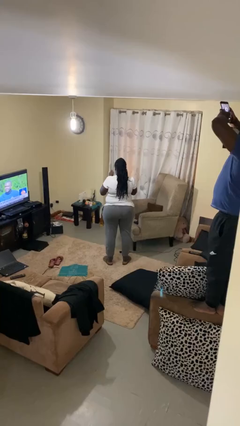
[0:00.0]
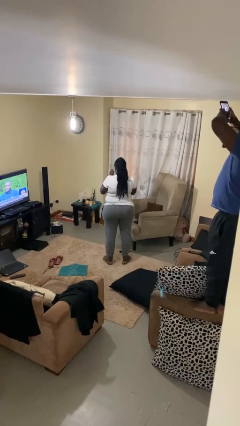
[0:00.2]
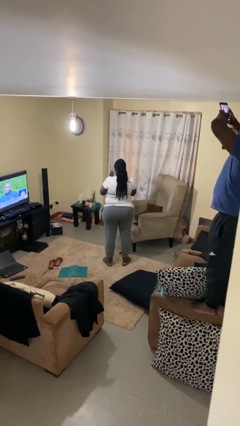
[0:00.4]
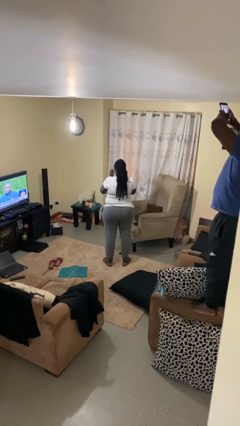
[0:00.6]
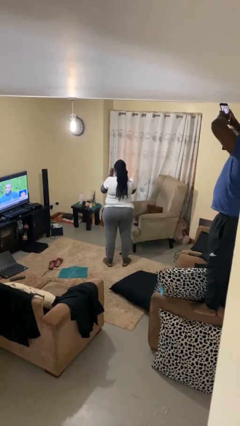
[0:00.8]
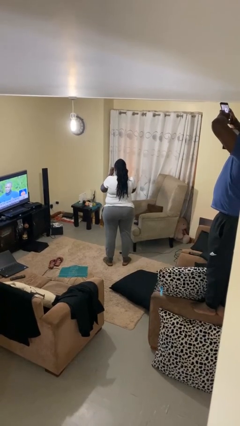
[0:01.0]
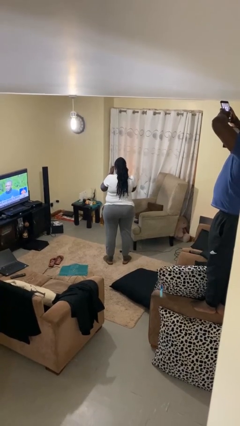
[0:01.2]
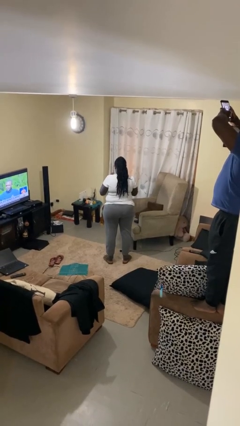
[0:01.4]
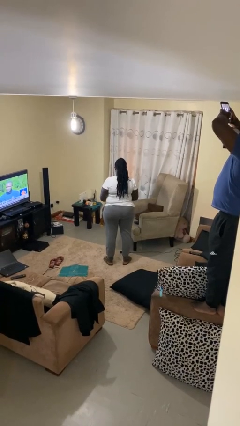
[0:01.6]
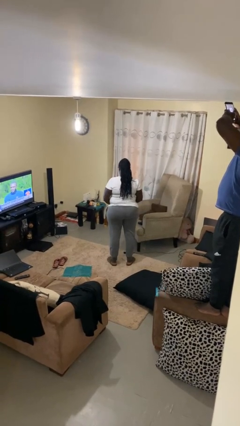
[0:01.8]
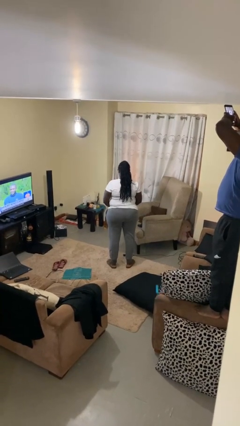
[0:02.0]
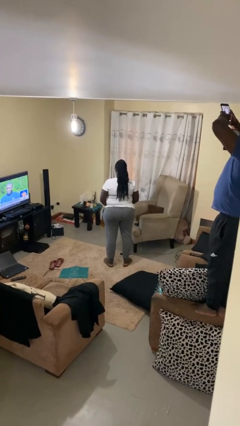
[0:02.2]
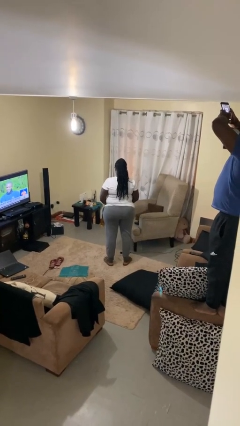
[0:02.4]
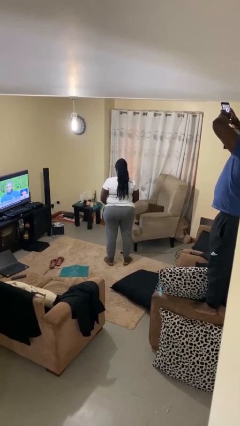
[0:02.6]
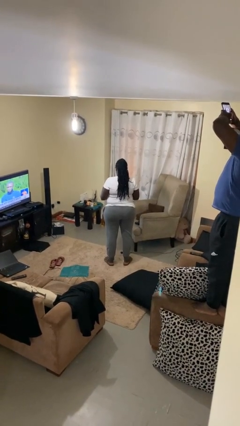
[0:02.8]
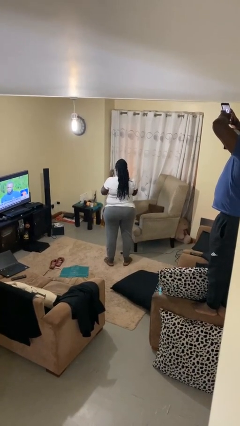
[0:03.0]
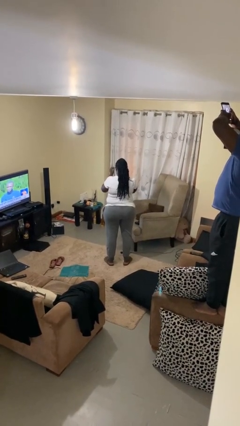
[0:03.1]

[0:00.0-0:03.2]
person puts on sunglasses

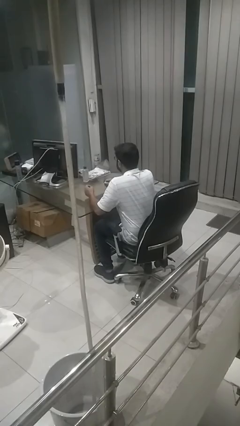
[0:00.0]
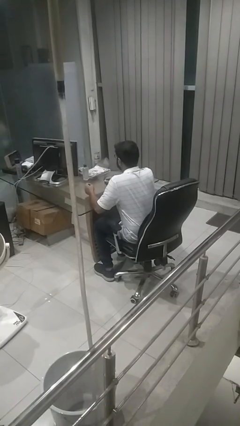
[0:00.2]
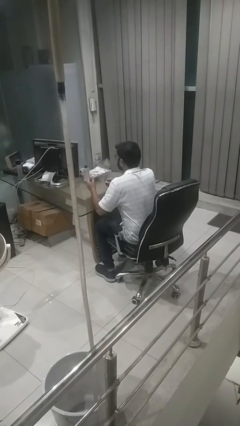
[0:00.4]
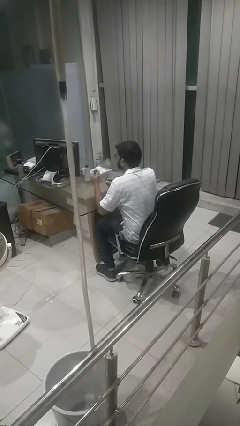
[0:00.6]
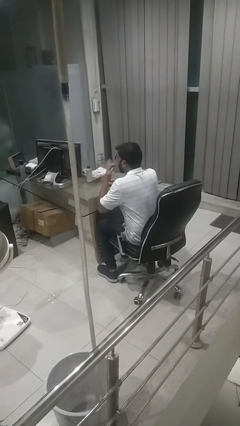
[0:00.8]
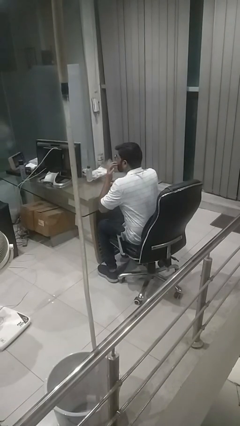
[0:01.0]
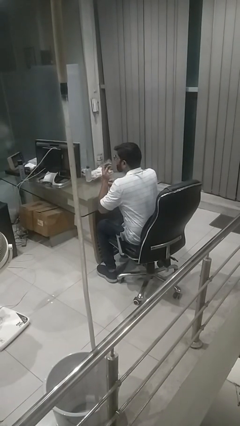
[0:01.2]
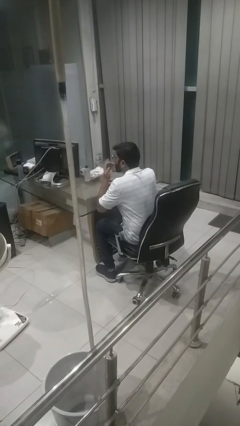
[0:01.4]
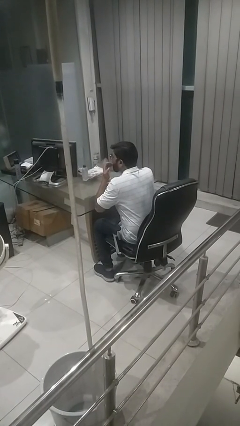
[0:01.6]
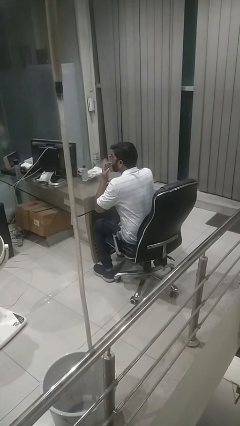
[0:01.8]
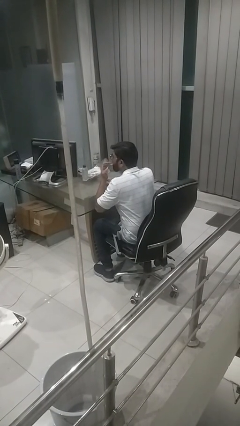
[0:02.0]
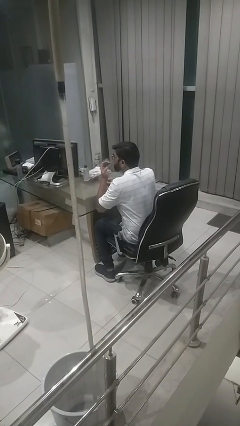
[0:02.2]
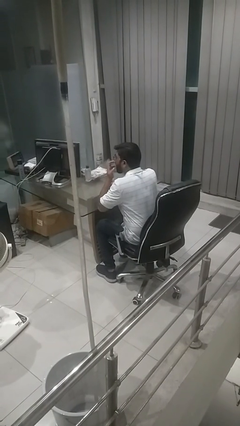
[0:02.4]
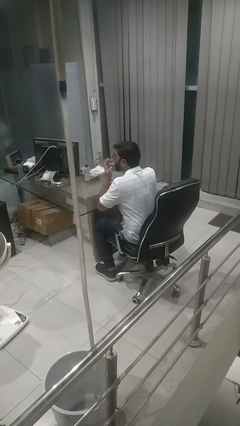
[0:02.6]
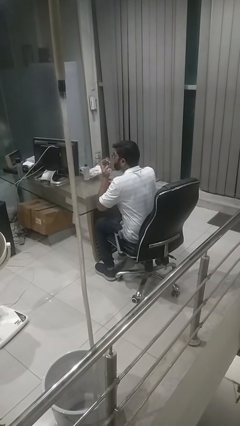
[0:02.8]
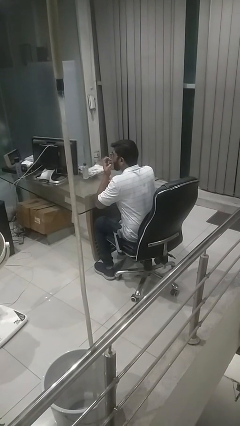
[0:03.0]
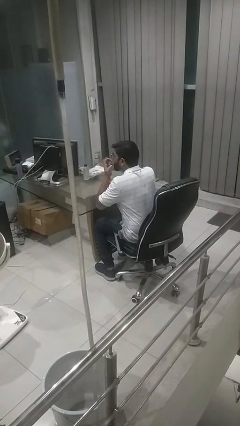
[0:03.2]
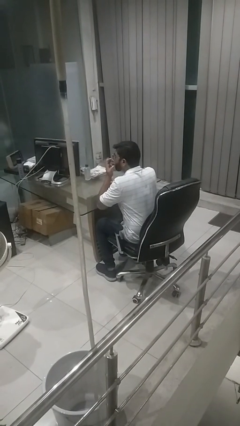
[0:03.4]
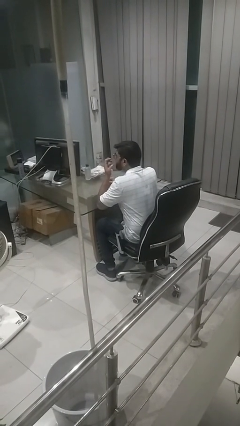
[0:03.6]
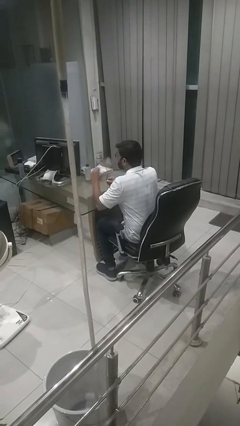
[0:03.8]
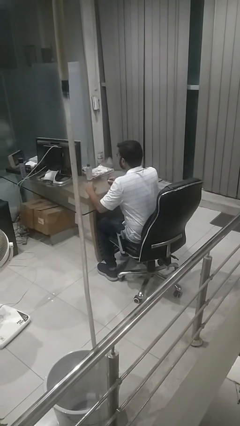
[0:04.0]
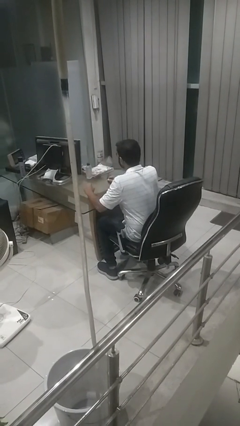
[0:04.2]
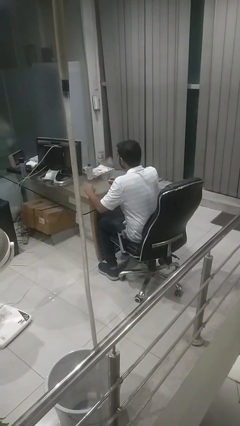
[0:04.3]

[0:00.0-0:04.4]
person licks fingers

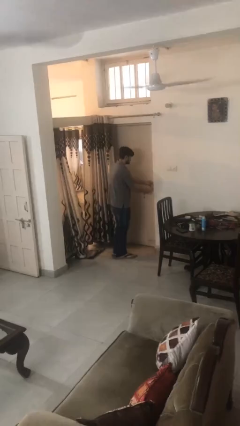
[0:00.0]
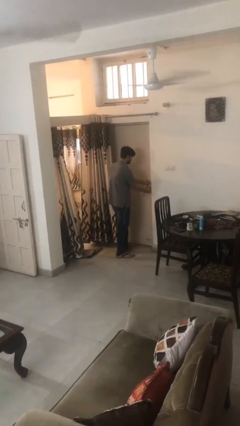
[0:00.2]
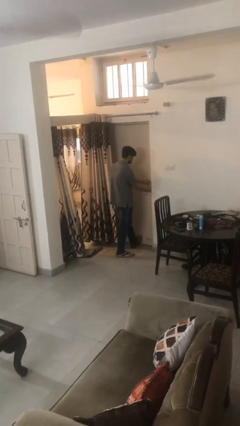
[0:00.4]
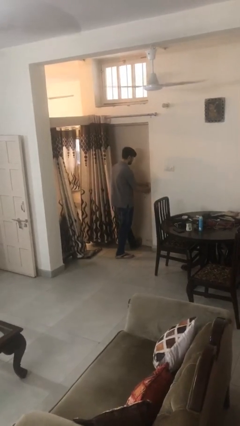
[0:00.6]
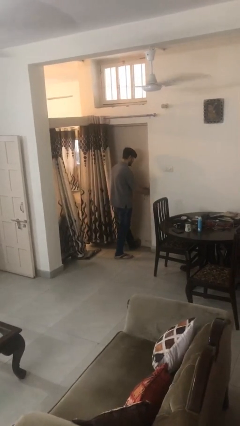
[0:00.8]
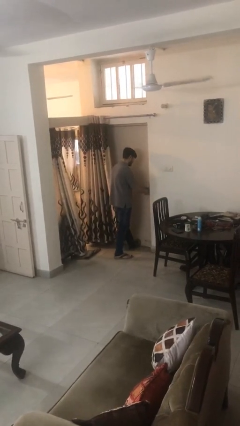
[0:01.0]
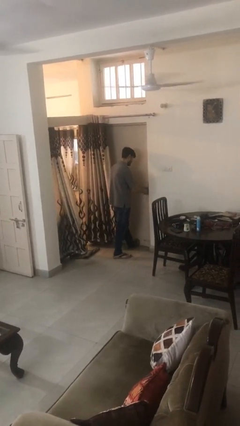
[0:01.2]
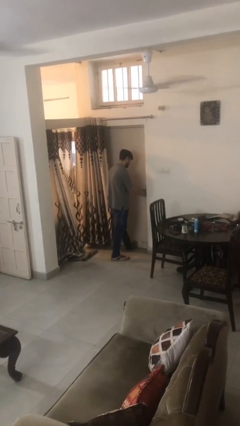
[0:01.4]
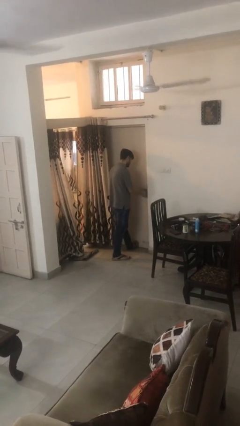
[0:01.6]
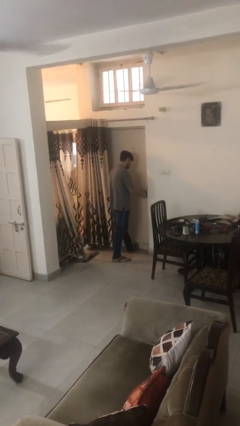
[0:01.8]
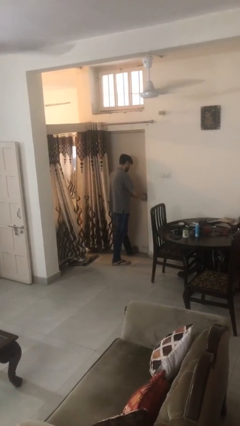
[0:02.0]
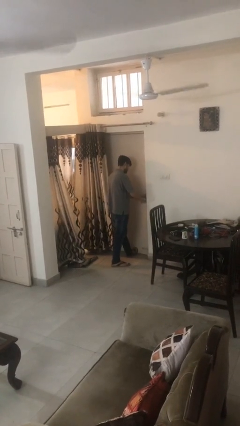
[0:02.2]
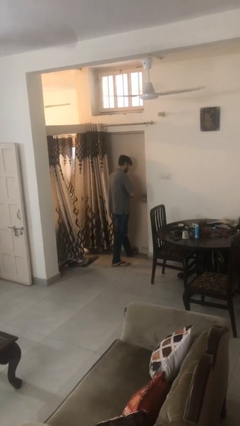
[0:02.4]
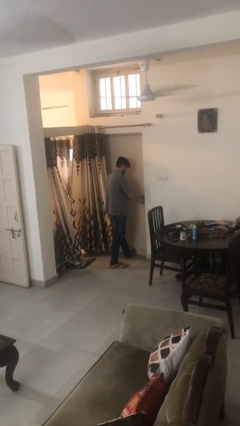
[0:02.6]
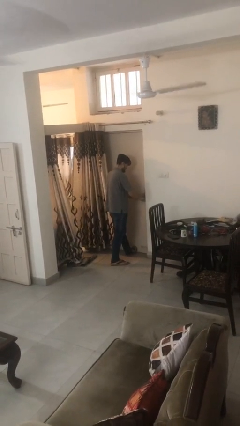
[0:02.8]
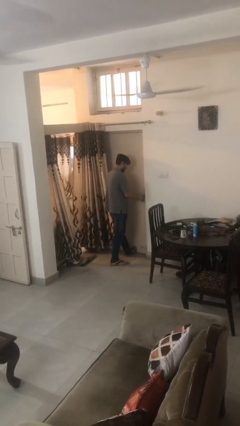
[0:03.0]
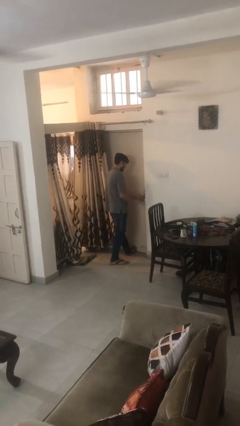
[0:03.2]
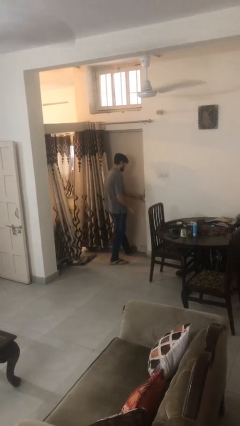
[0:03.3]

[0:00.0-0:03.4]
person locks door with keys

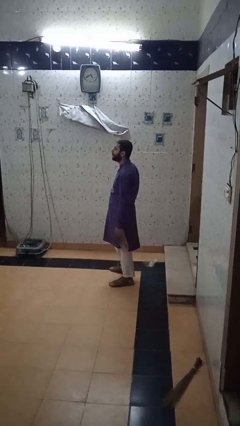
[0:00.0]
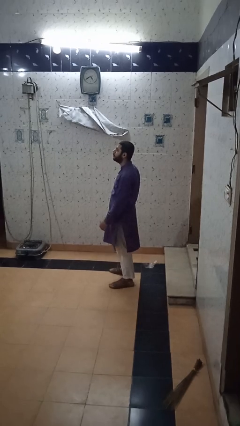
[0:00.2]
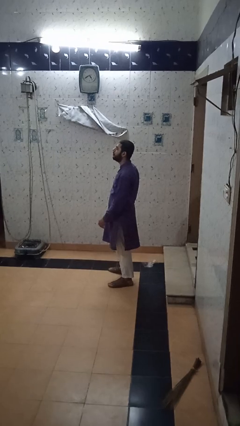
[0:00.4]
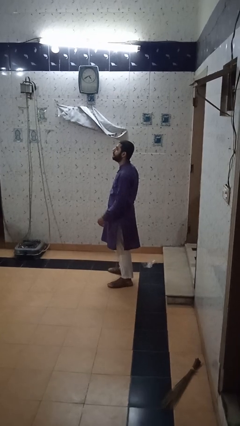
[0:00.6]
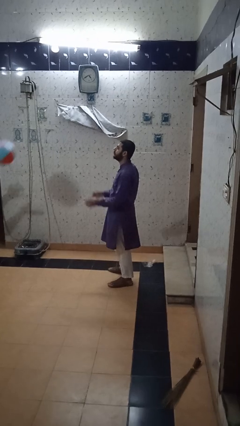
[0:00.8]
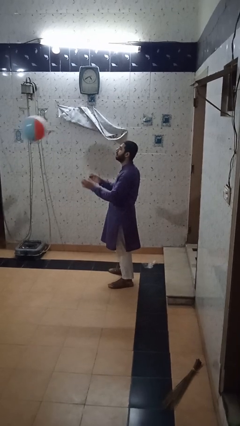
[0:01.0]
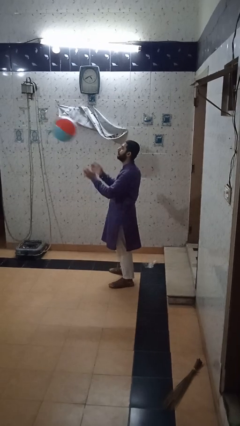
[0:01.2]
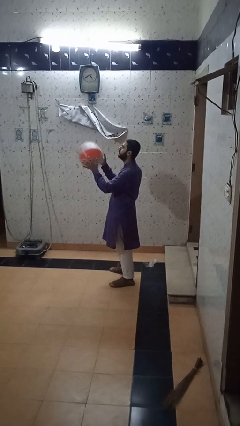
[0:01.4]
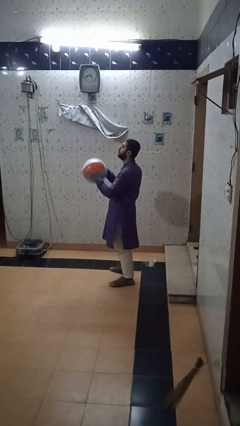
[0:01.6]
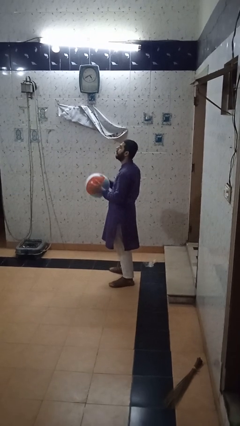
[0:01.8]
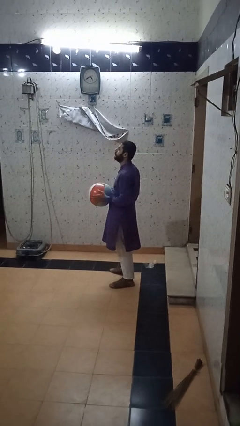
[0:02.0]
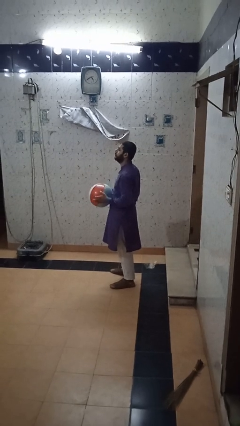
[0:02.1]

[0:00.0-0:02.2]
person catches object from person

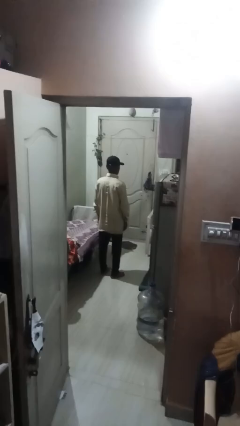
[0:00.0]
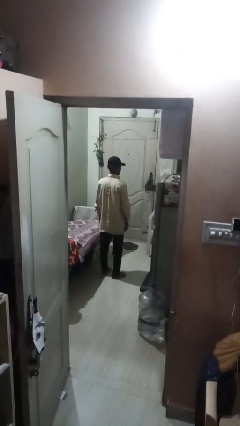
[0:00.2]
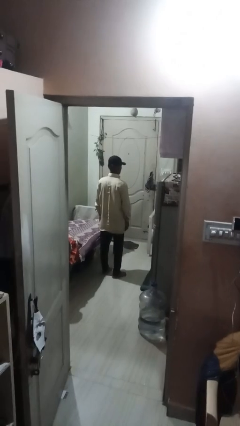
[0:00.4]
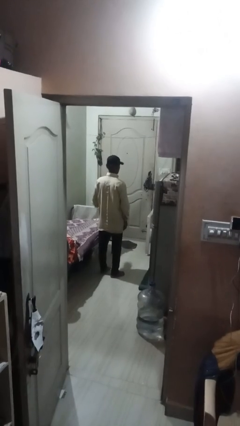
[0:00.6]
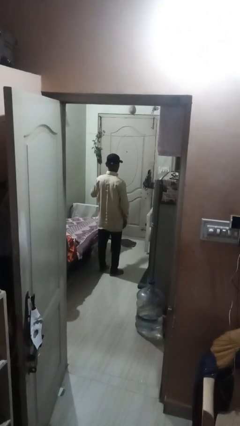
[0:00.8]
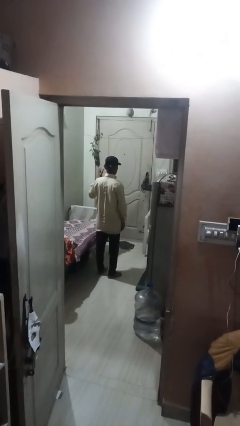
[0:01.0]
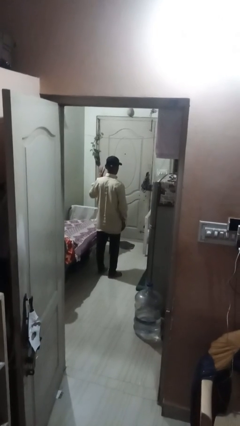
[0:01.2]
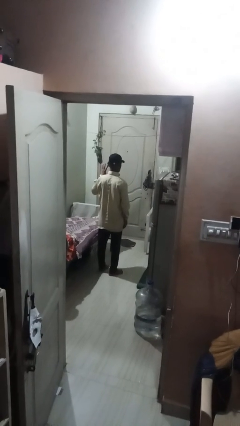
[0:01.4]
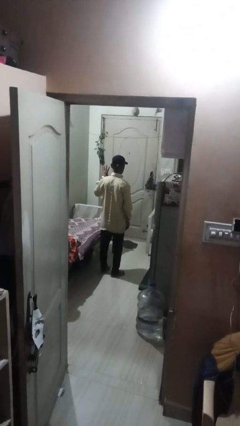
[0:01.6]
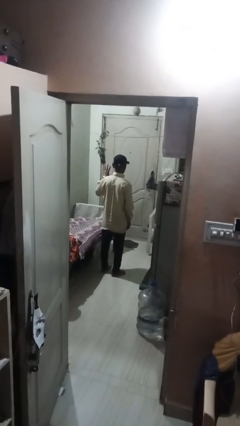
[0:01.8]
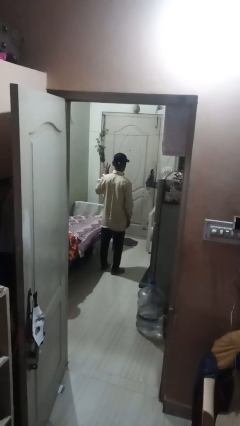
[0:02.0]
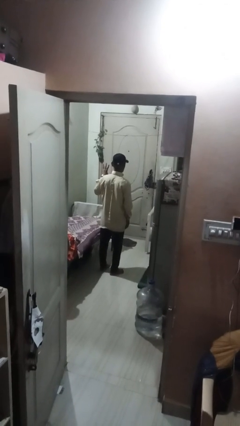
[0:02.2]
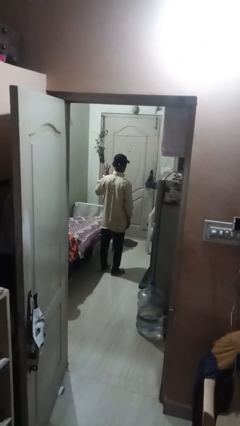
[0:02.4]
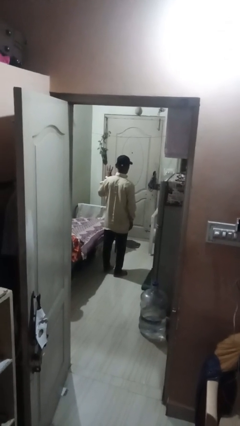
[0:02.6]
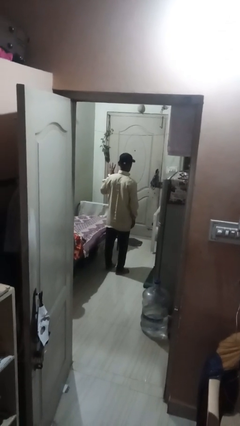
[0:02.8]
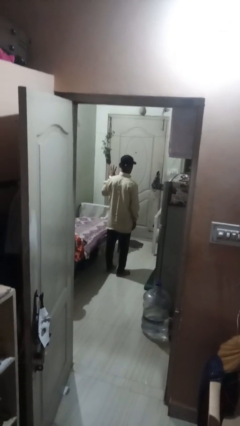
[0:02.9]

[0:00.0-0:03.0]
person gestures number three

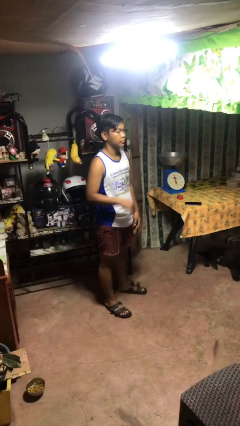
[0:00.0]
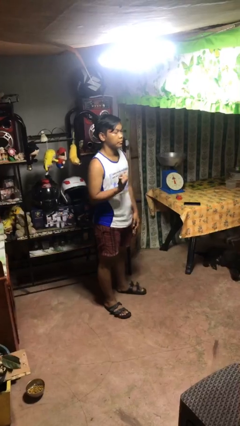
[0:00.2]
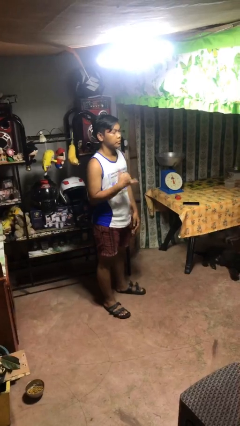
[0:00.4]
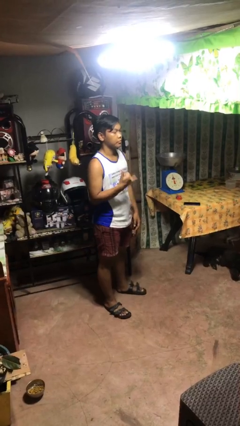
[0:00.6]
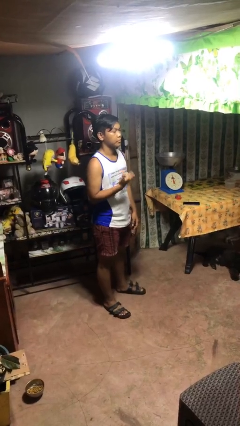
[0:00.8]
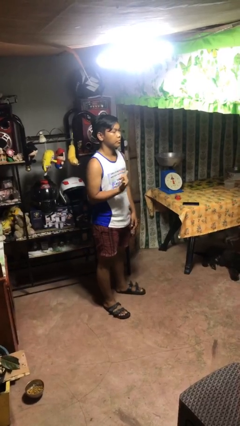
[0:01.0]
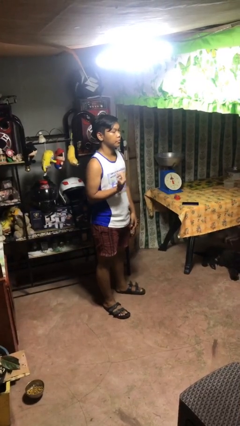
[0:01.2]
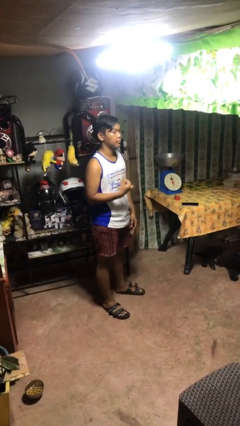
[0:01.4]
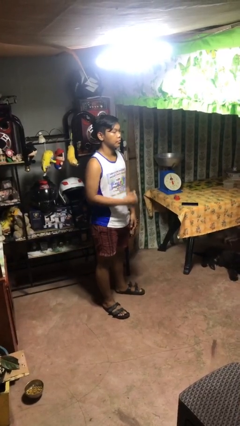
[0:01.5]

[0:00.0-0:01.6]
person gestures hang loose
